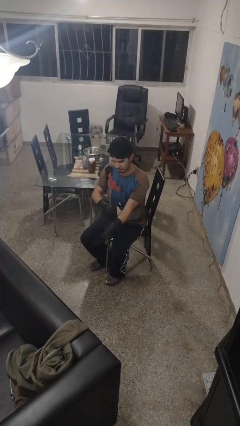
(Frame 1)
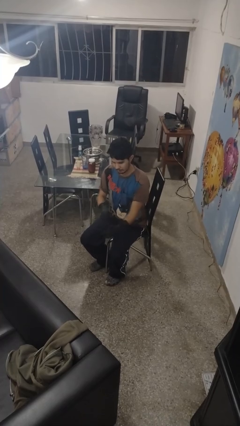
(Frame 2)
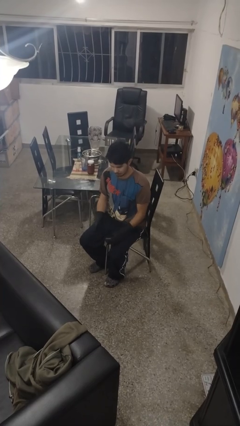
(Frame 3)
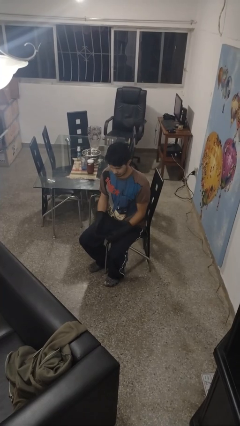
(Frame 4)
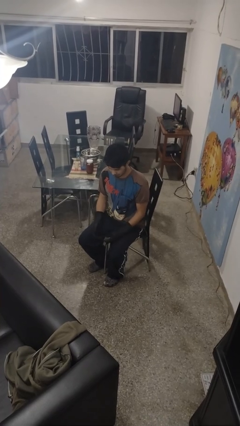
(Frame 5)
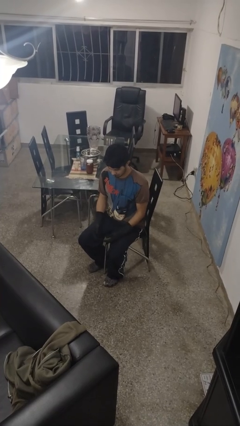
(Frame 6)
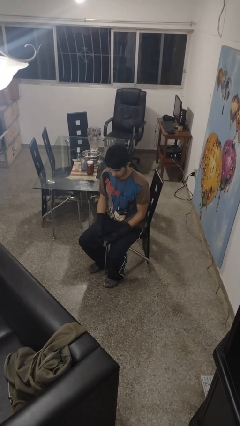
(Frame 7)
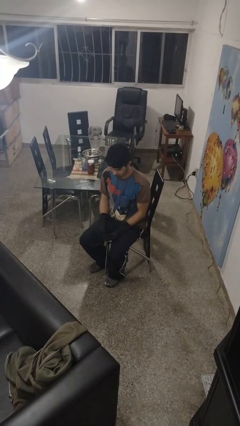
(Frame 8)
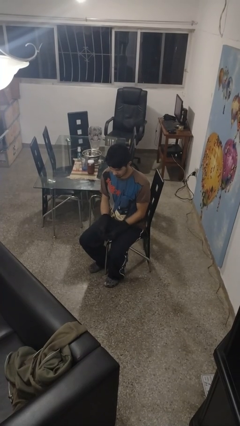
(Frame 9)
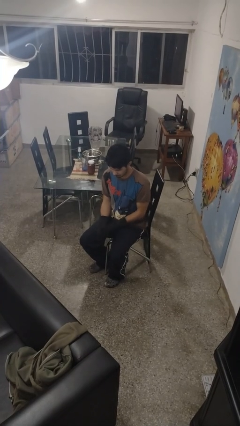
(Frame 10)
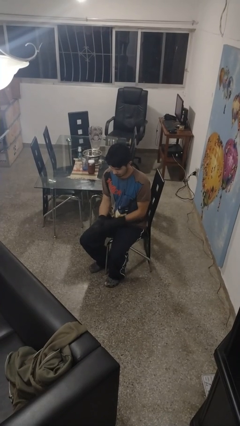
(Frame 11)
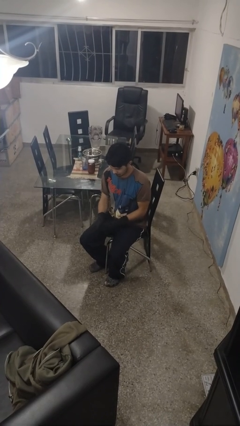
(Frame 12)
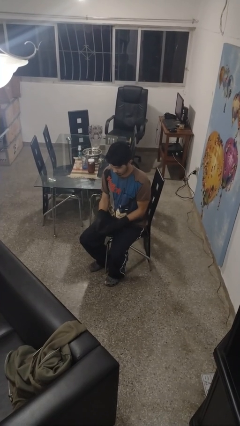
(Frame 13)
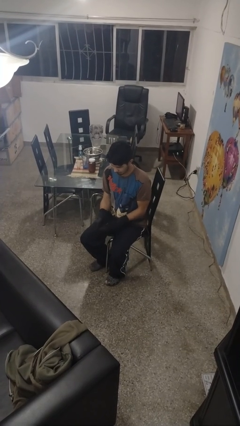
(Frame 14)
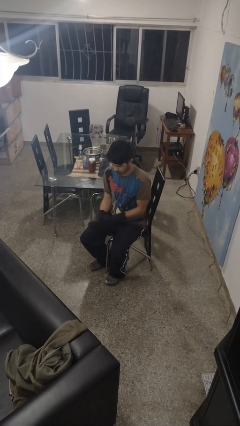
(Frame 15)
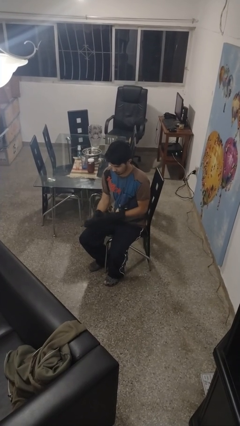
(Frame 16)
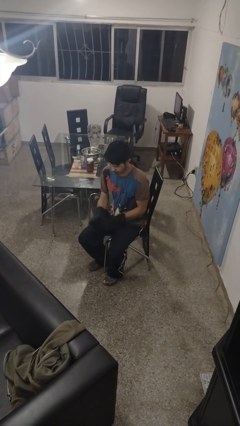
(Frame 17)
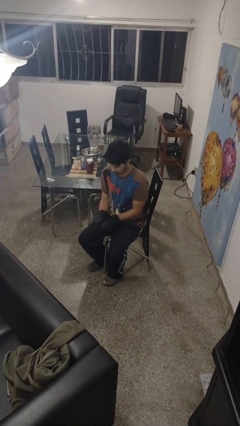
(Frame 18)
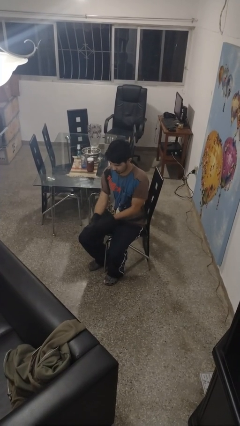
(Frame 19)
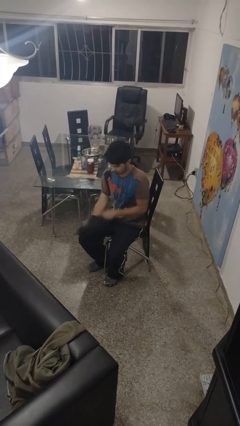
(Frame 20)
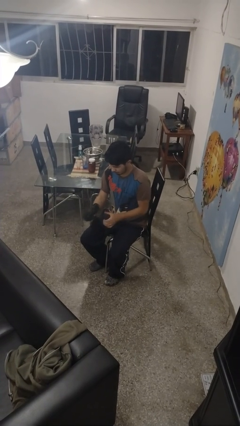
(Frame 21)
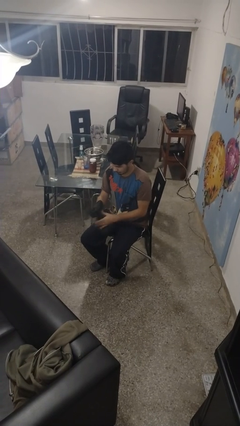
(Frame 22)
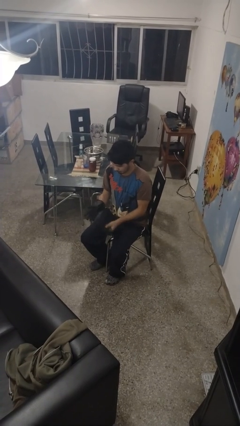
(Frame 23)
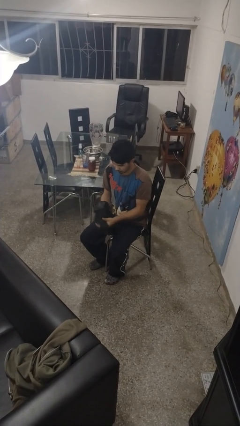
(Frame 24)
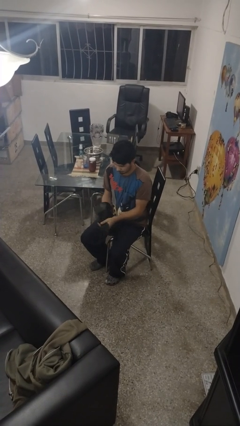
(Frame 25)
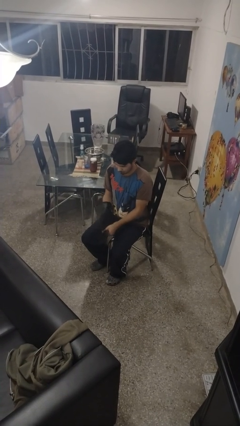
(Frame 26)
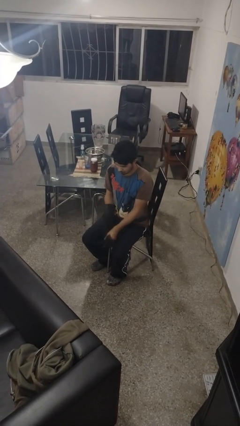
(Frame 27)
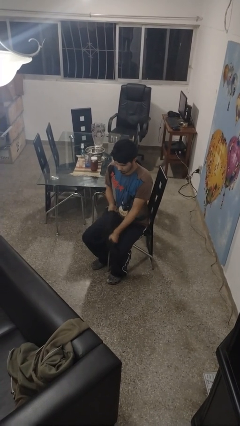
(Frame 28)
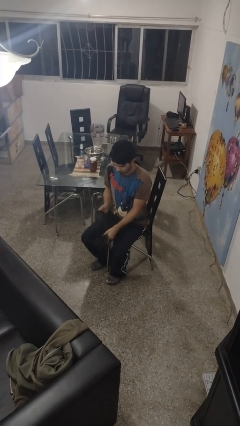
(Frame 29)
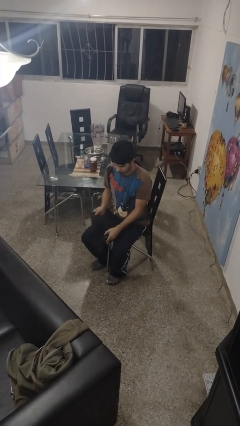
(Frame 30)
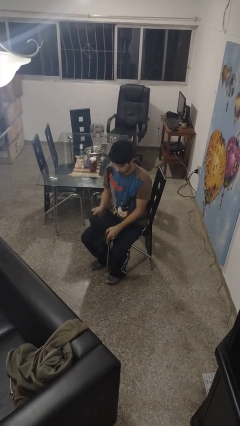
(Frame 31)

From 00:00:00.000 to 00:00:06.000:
person takes off gloves

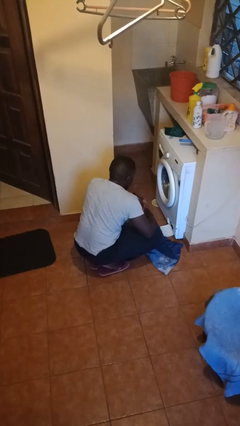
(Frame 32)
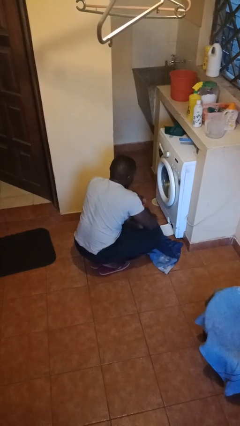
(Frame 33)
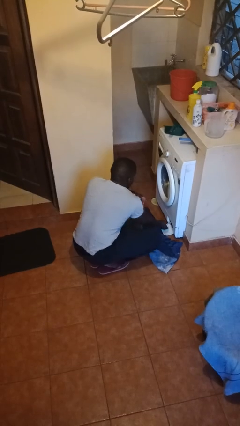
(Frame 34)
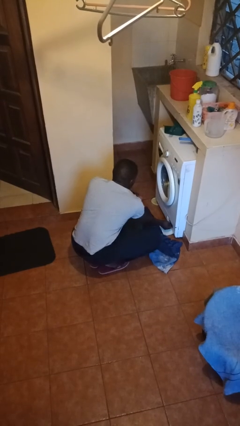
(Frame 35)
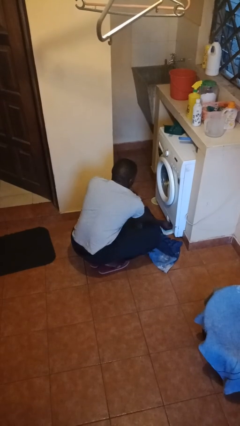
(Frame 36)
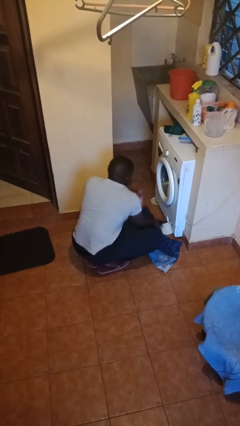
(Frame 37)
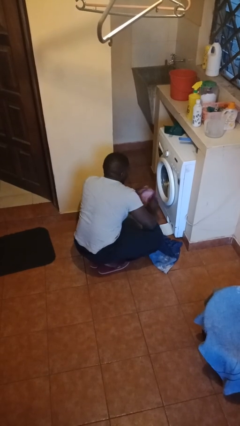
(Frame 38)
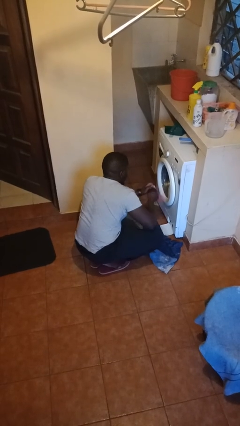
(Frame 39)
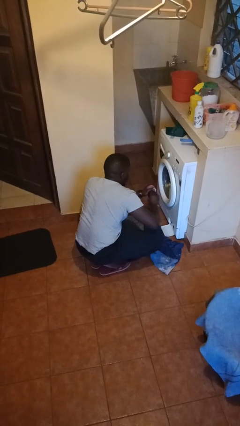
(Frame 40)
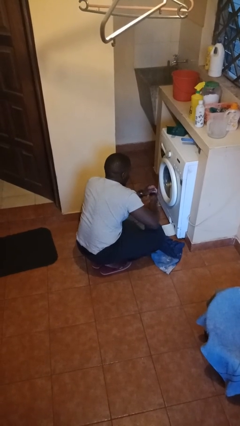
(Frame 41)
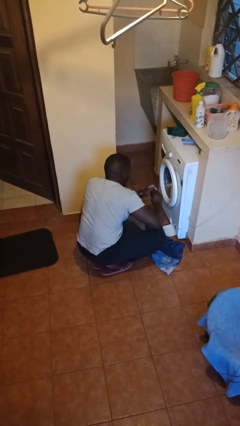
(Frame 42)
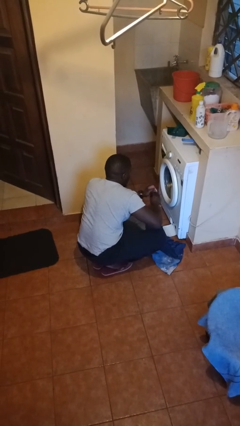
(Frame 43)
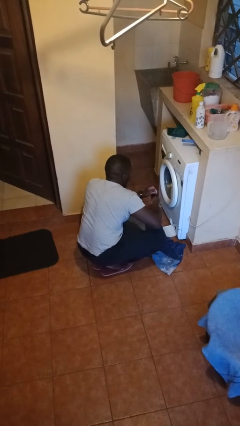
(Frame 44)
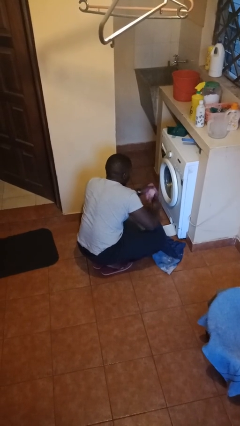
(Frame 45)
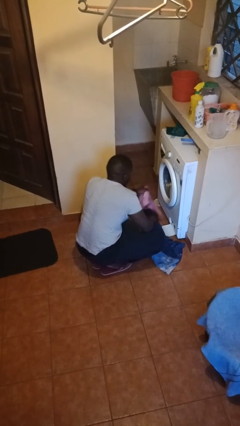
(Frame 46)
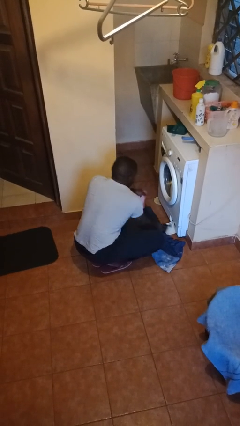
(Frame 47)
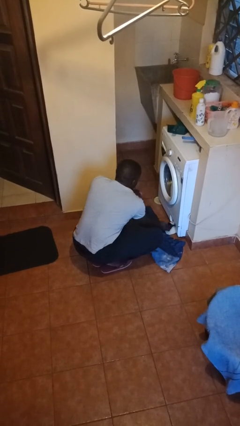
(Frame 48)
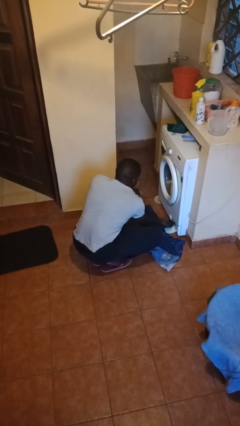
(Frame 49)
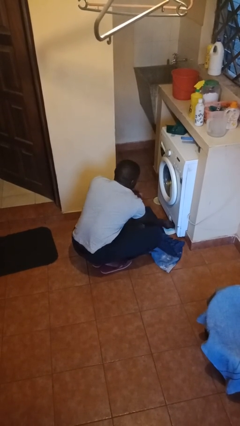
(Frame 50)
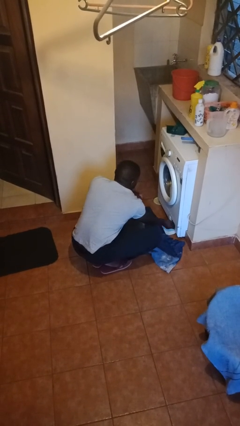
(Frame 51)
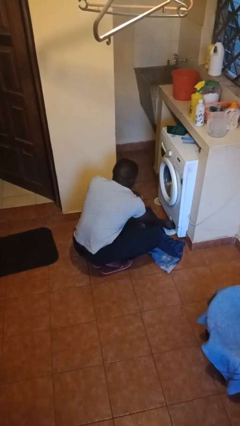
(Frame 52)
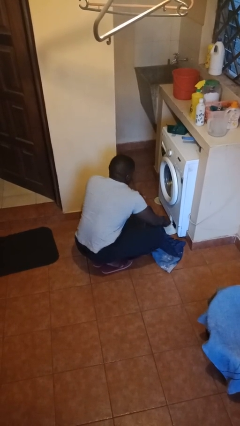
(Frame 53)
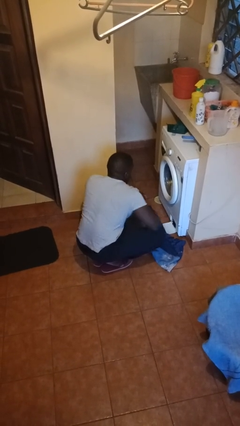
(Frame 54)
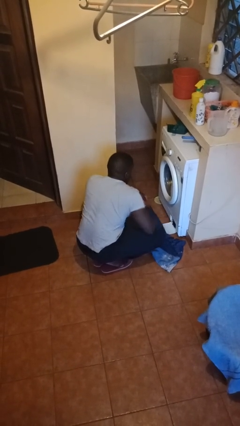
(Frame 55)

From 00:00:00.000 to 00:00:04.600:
person cleans dryer lint trap

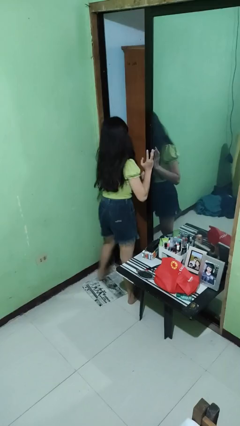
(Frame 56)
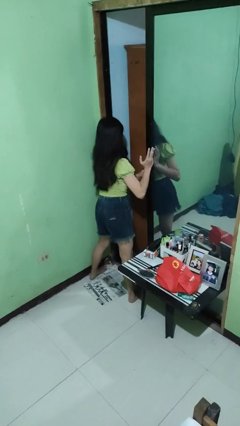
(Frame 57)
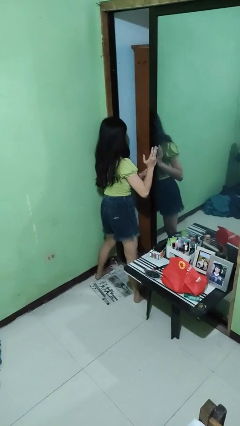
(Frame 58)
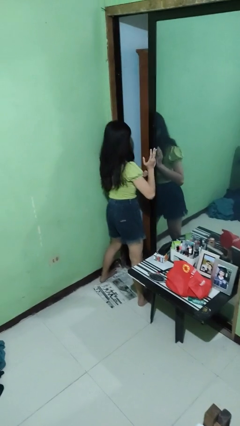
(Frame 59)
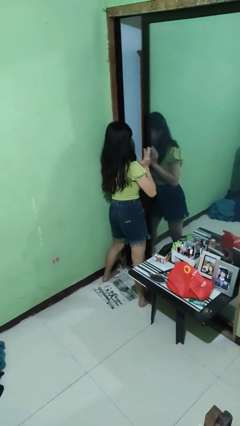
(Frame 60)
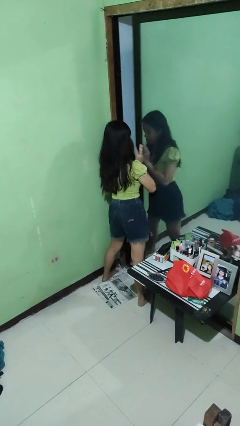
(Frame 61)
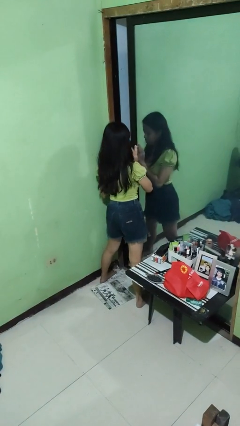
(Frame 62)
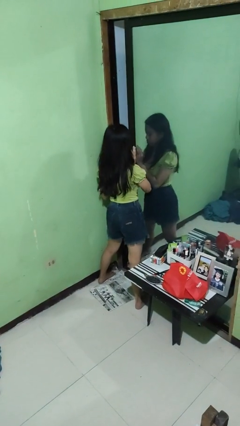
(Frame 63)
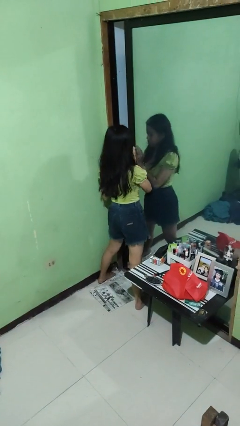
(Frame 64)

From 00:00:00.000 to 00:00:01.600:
person closes sliding door

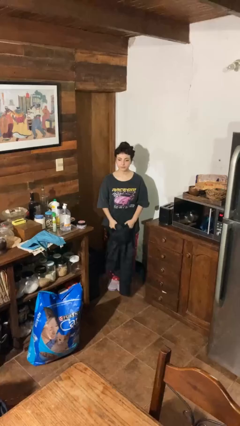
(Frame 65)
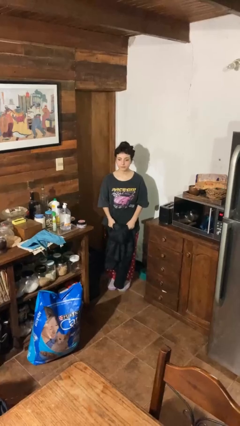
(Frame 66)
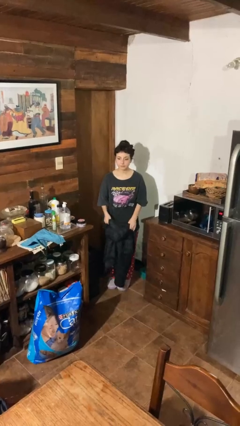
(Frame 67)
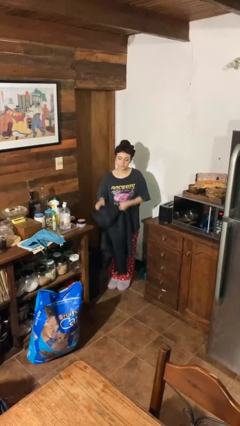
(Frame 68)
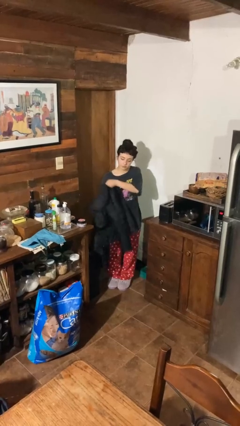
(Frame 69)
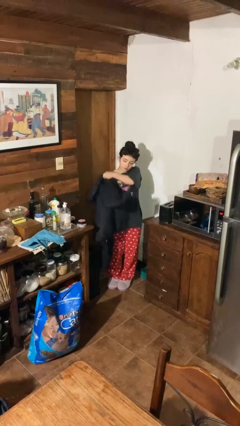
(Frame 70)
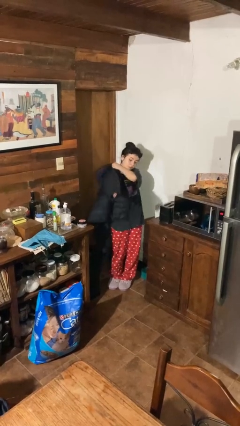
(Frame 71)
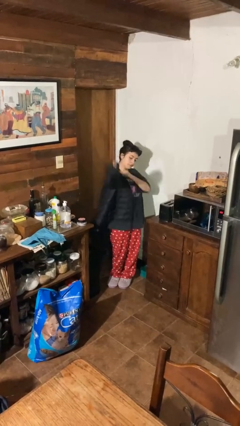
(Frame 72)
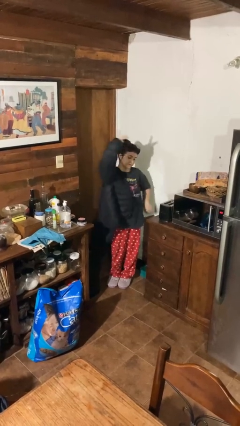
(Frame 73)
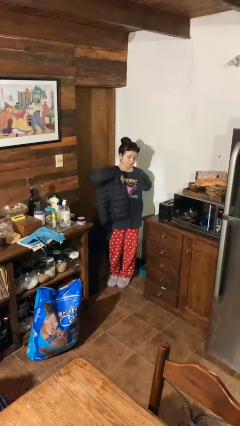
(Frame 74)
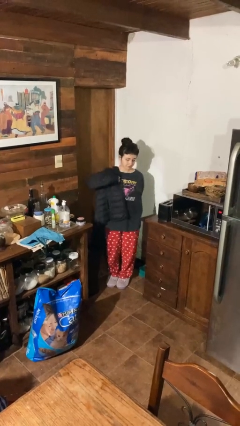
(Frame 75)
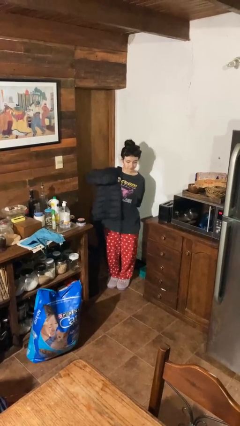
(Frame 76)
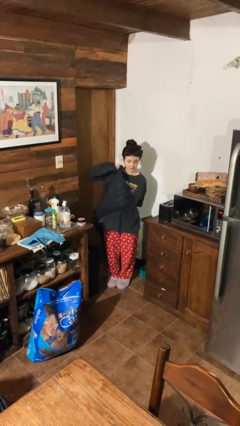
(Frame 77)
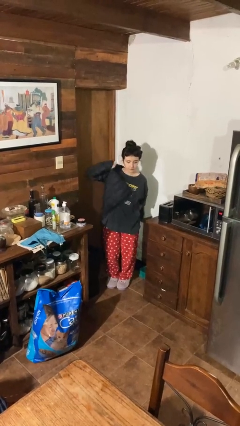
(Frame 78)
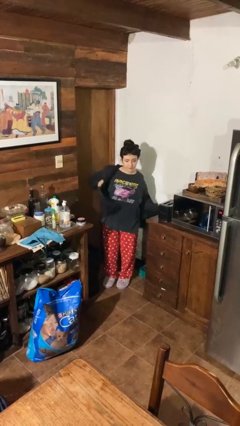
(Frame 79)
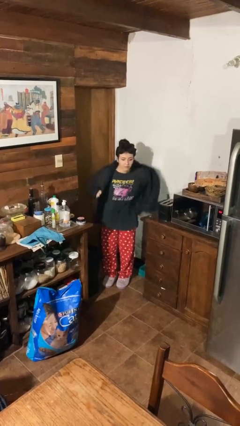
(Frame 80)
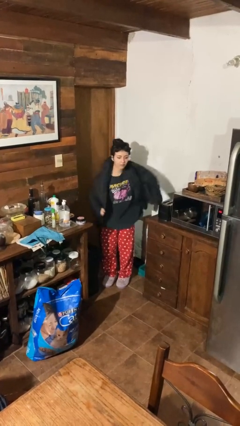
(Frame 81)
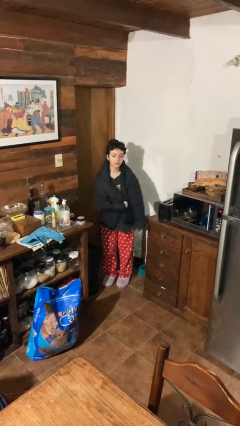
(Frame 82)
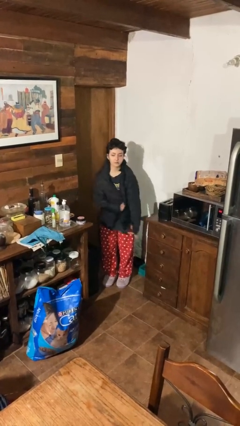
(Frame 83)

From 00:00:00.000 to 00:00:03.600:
person puts on jacket

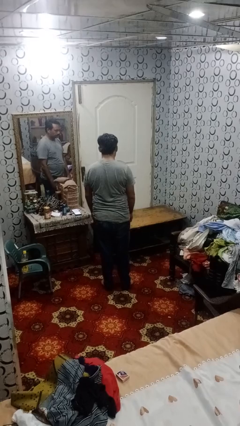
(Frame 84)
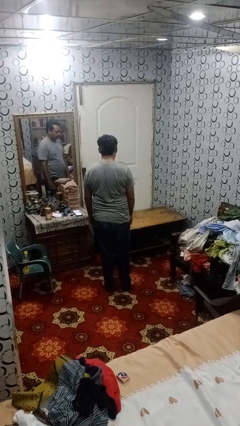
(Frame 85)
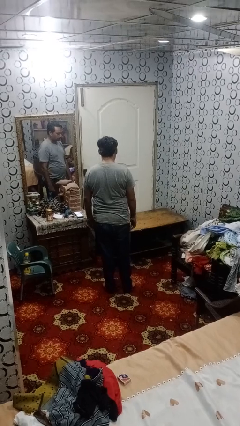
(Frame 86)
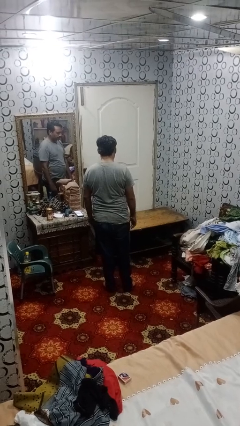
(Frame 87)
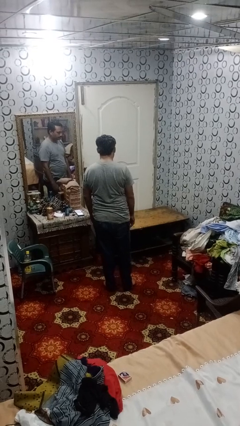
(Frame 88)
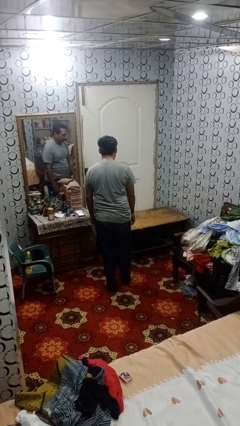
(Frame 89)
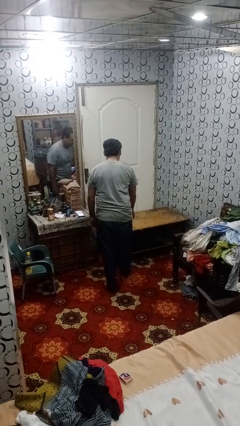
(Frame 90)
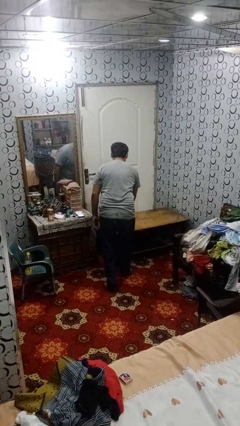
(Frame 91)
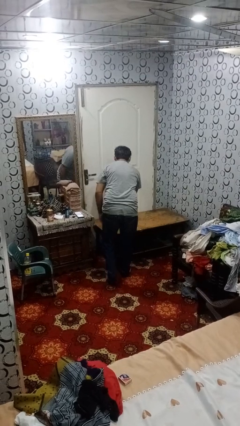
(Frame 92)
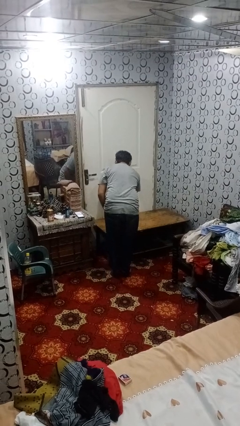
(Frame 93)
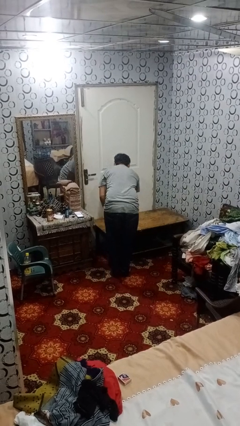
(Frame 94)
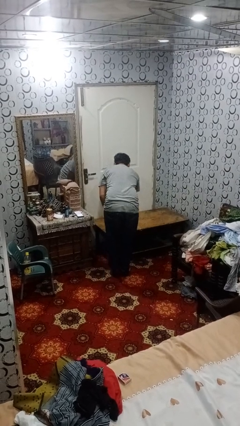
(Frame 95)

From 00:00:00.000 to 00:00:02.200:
person picks up object from table
